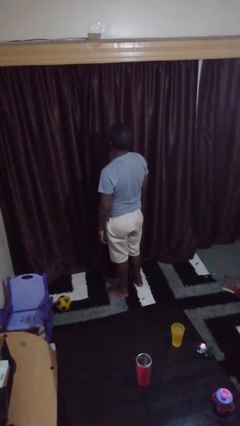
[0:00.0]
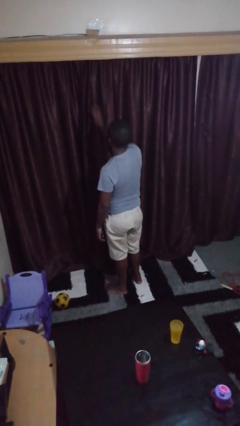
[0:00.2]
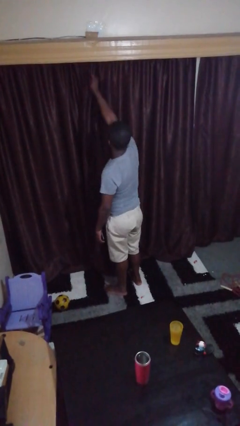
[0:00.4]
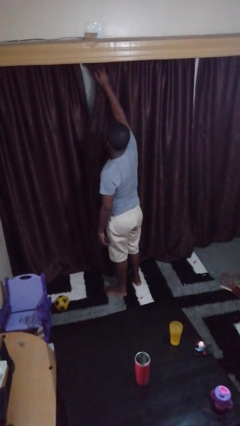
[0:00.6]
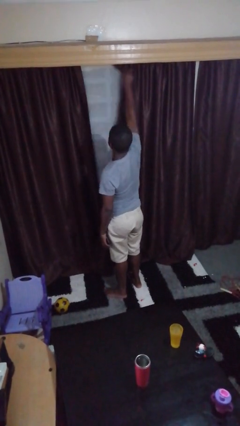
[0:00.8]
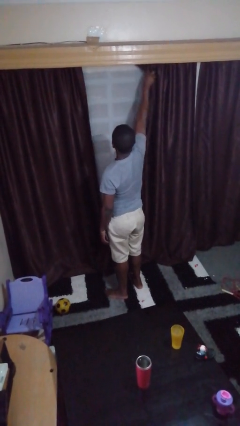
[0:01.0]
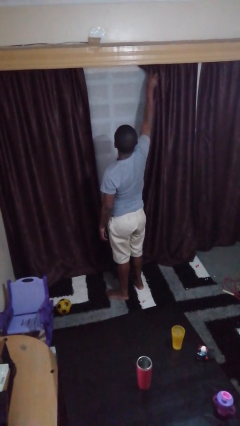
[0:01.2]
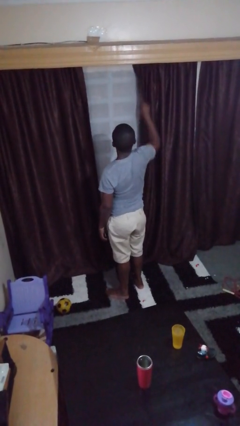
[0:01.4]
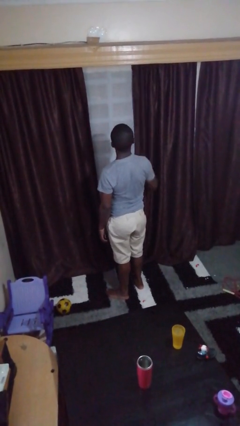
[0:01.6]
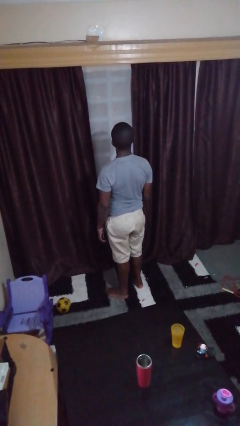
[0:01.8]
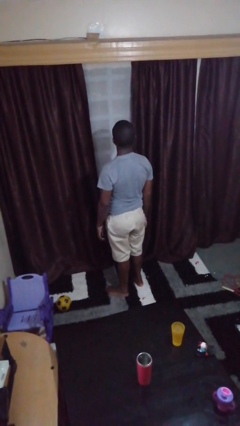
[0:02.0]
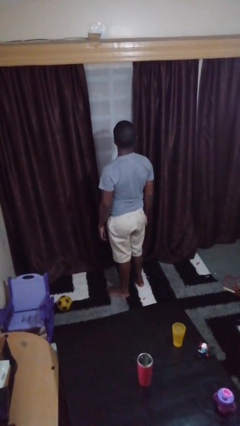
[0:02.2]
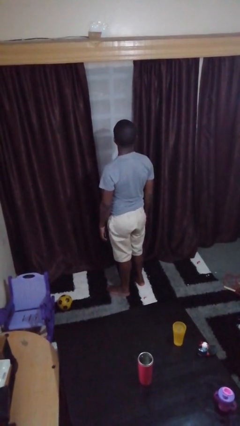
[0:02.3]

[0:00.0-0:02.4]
person opens curtains

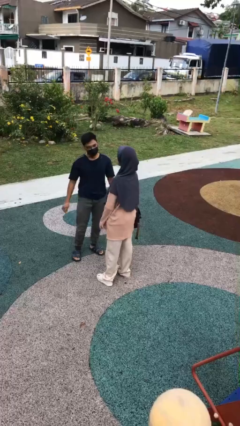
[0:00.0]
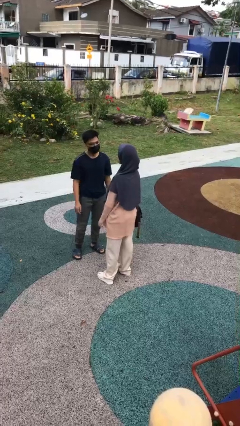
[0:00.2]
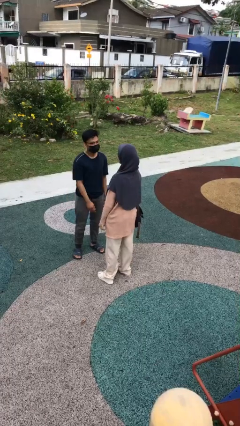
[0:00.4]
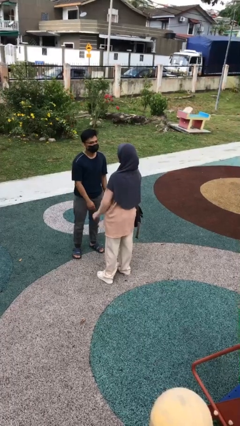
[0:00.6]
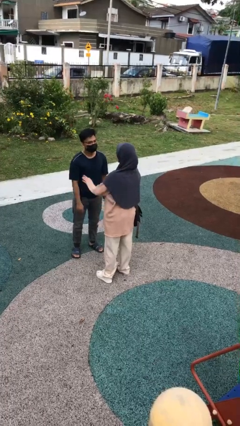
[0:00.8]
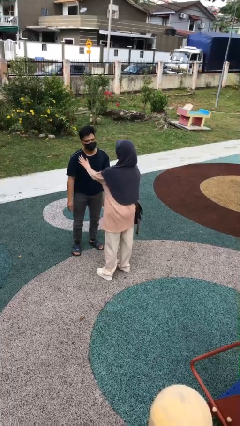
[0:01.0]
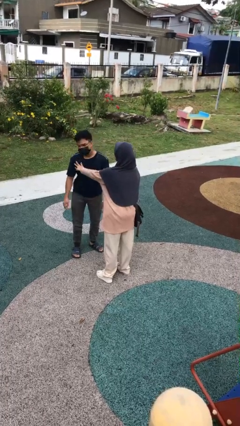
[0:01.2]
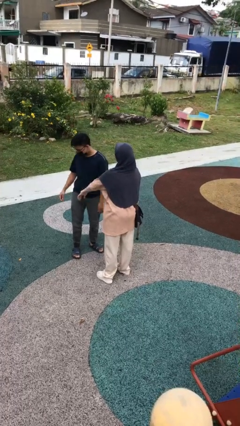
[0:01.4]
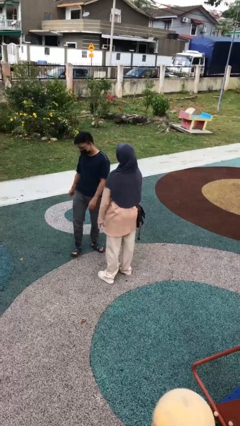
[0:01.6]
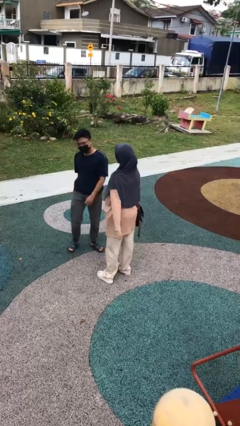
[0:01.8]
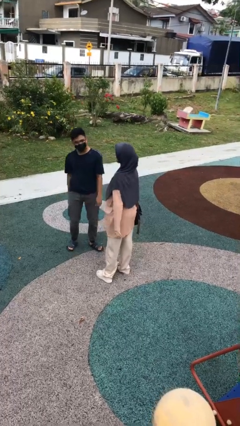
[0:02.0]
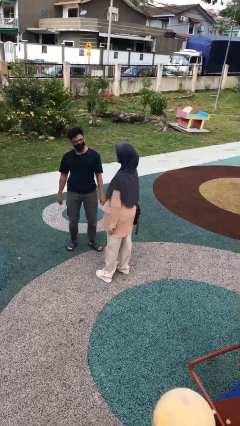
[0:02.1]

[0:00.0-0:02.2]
person shoves person

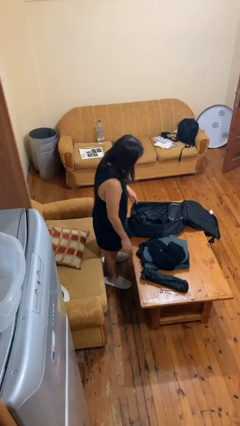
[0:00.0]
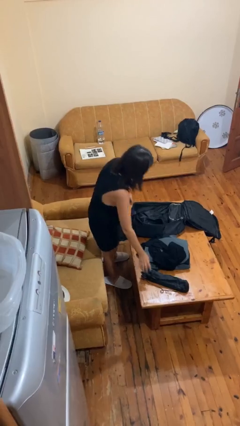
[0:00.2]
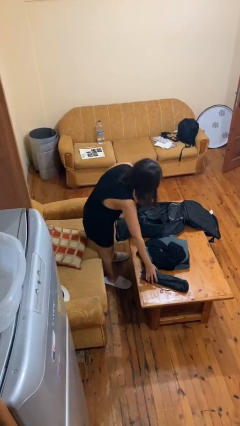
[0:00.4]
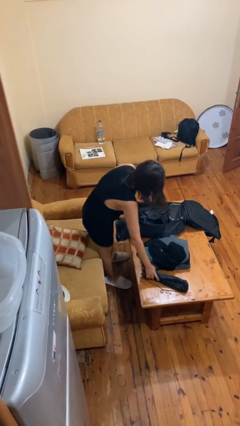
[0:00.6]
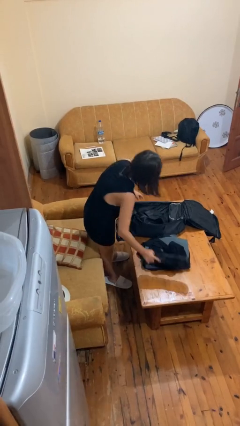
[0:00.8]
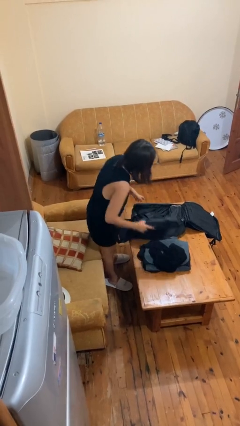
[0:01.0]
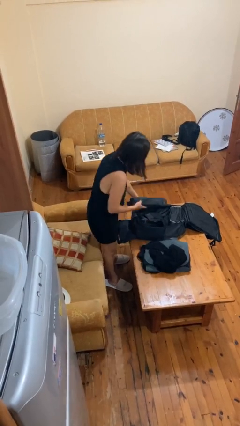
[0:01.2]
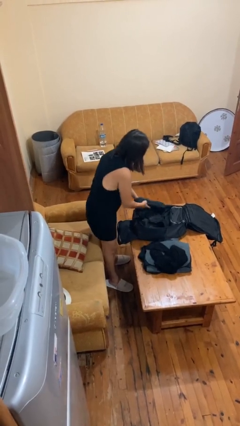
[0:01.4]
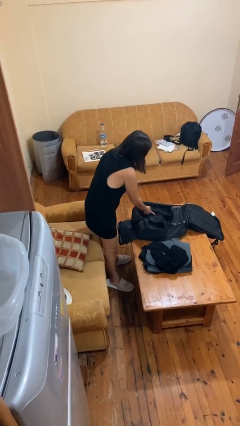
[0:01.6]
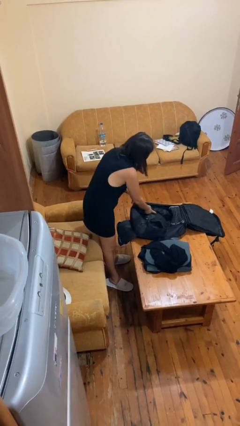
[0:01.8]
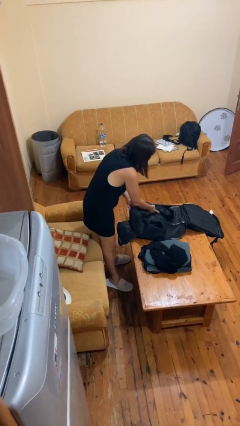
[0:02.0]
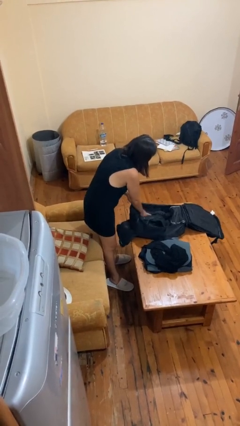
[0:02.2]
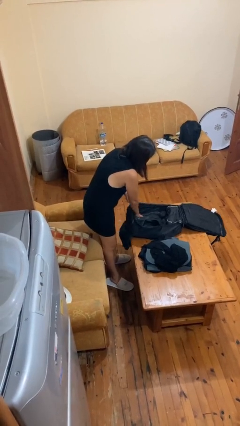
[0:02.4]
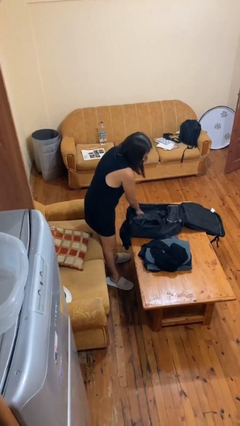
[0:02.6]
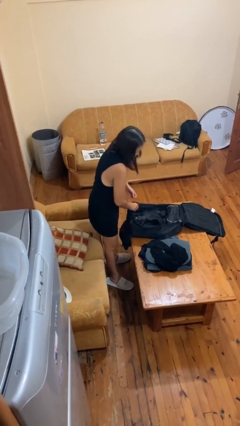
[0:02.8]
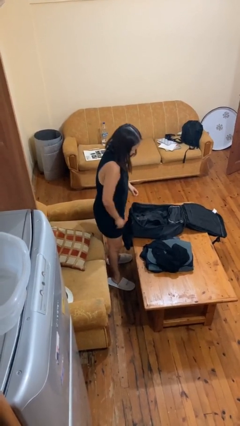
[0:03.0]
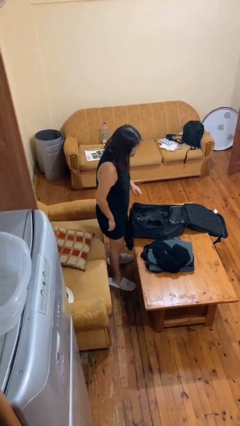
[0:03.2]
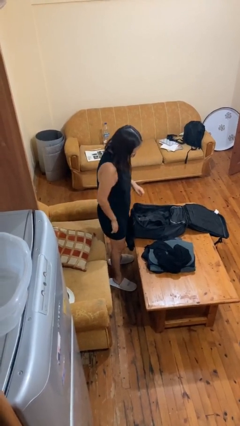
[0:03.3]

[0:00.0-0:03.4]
person loads clothes into suitcase

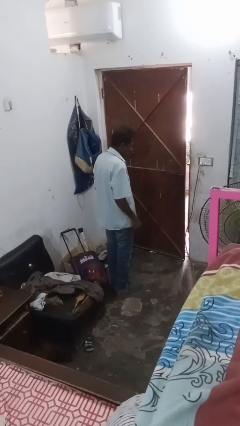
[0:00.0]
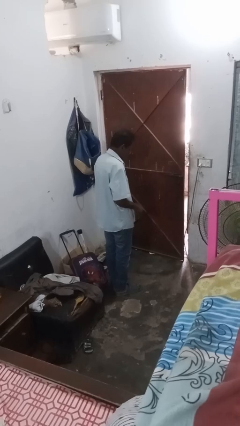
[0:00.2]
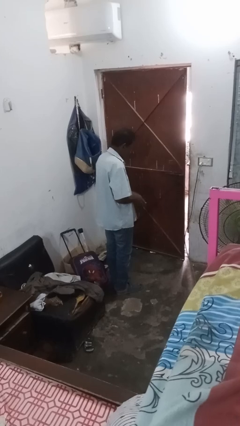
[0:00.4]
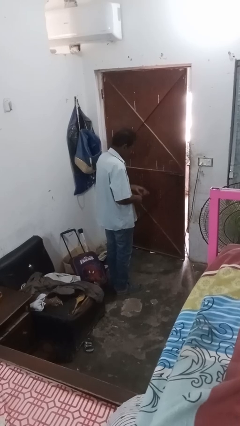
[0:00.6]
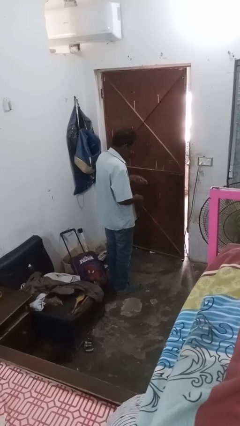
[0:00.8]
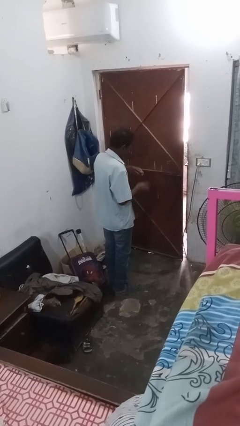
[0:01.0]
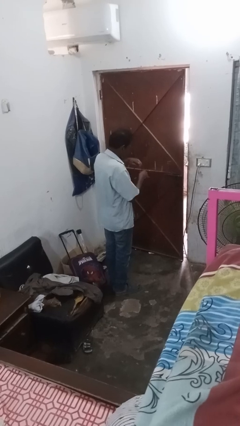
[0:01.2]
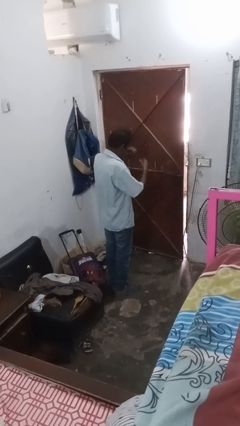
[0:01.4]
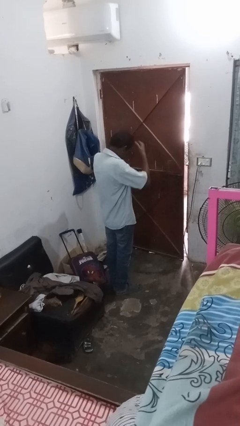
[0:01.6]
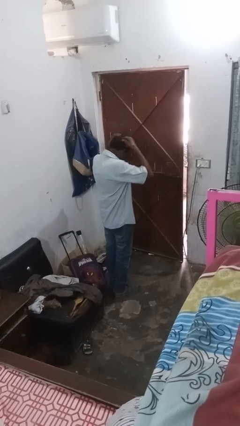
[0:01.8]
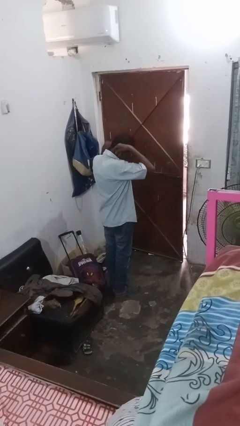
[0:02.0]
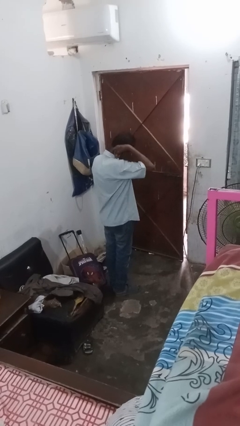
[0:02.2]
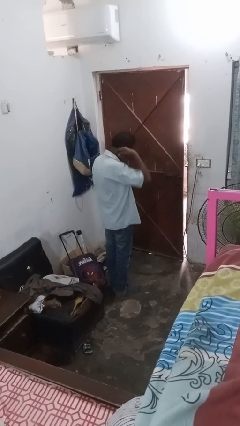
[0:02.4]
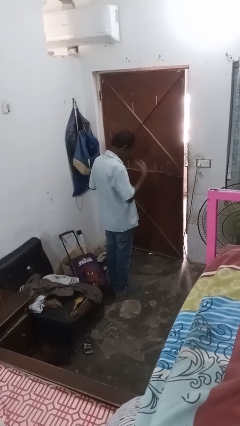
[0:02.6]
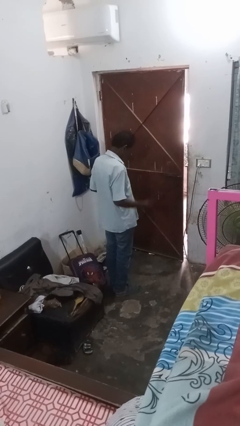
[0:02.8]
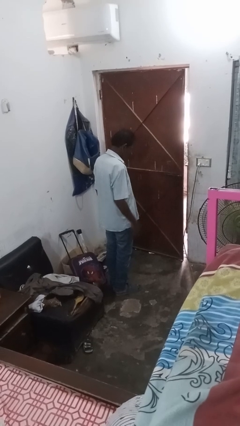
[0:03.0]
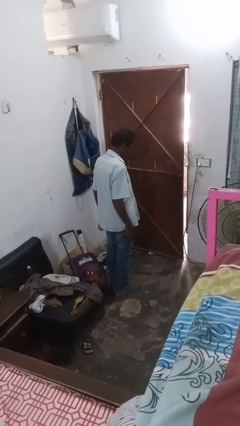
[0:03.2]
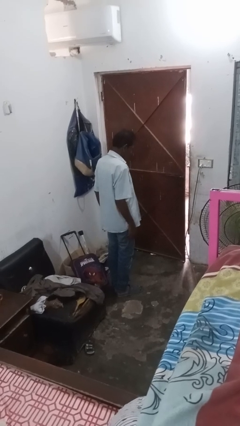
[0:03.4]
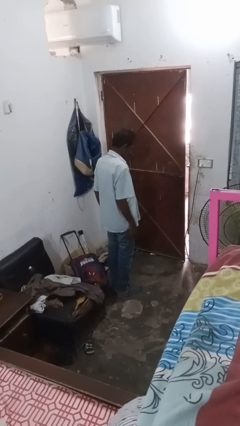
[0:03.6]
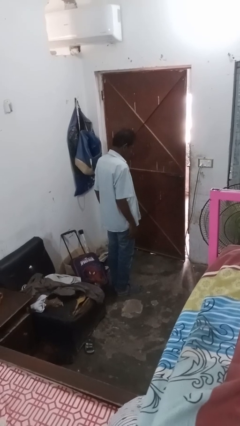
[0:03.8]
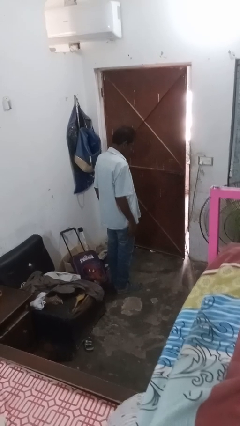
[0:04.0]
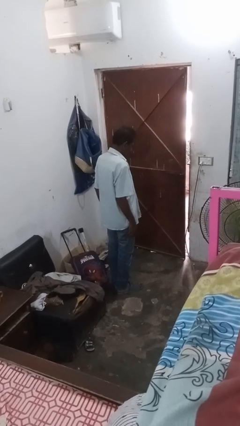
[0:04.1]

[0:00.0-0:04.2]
person puts on necklace

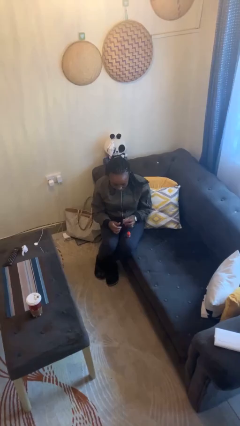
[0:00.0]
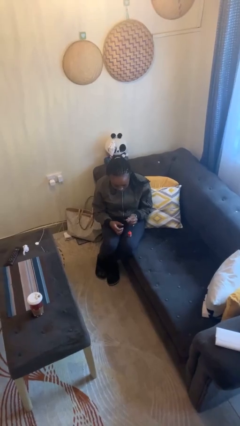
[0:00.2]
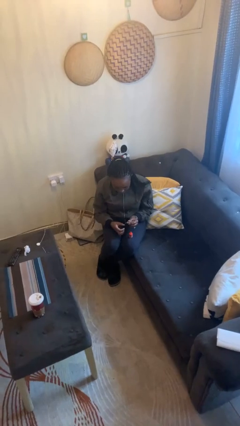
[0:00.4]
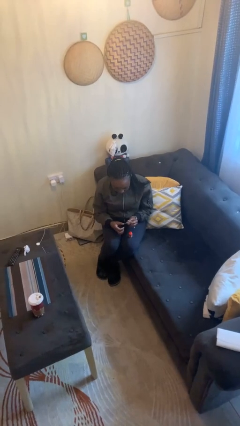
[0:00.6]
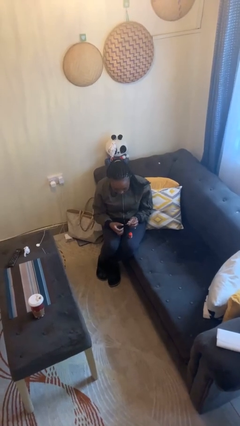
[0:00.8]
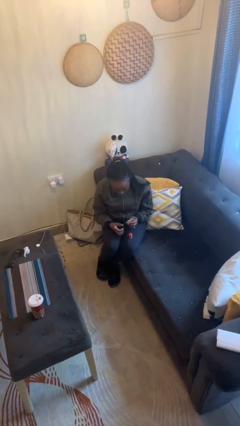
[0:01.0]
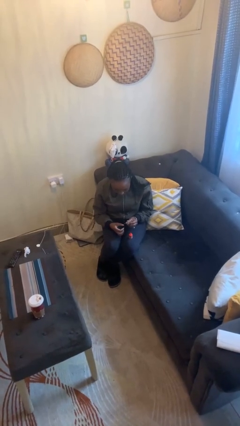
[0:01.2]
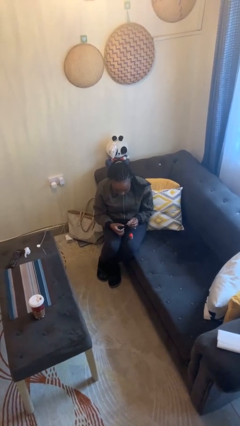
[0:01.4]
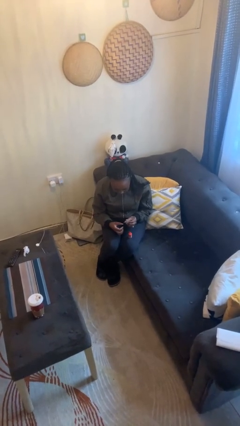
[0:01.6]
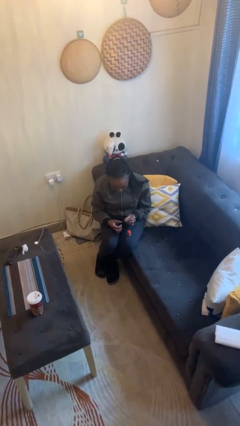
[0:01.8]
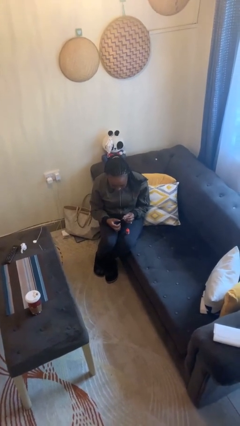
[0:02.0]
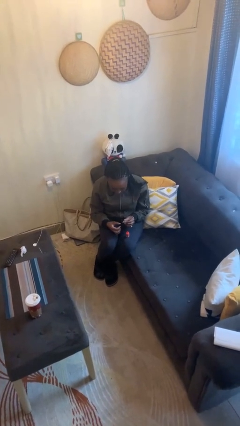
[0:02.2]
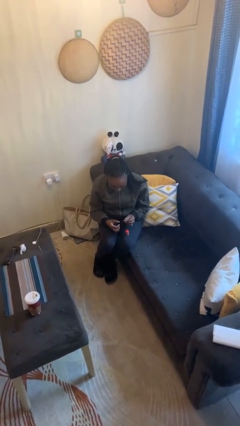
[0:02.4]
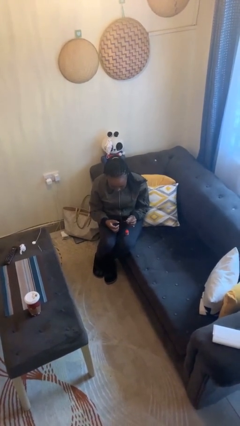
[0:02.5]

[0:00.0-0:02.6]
person paints fingernails

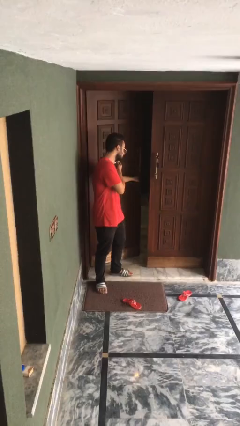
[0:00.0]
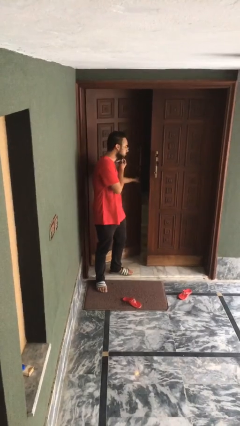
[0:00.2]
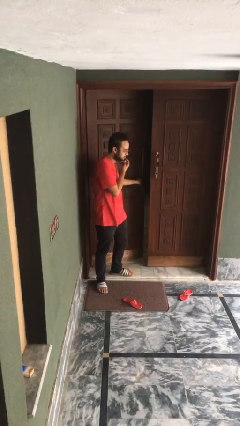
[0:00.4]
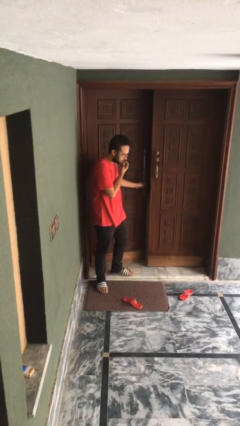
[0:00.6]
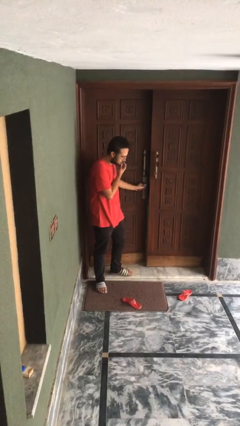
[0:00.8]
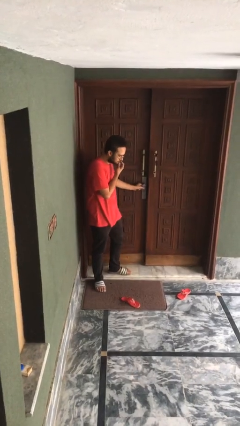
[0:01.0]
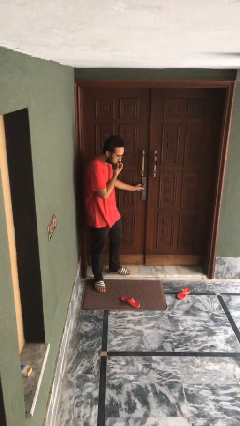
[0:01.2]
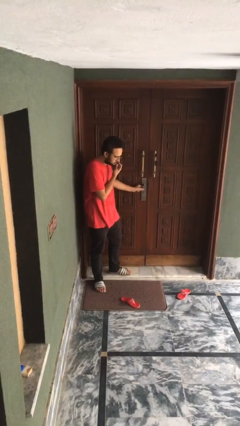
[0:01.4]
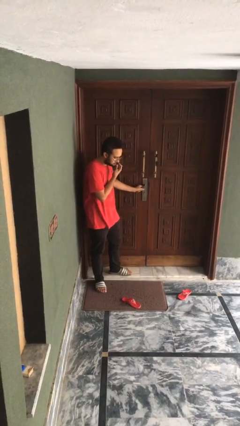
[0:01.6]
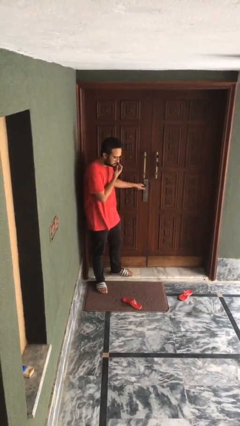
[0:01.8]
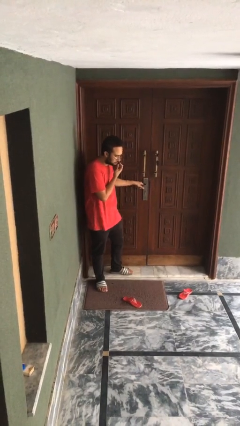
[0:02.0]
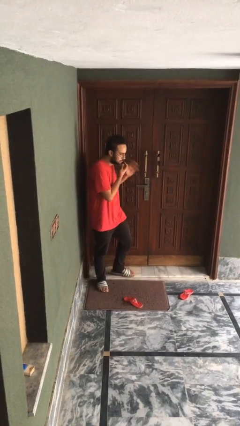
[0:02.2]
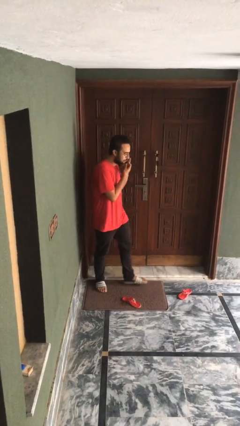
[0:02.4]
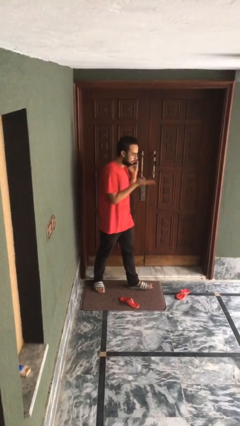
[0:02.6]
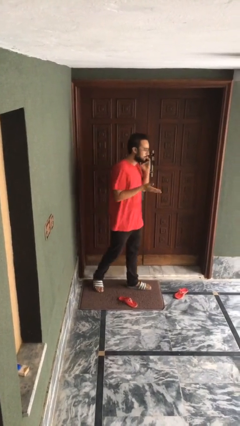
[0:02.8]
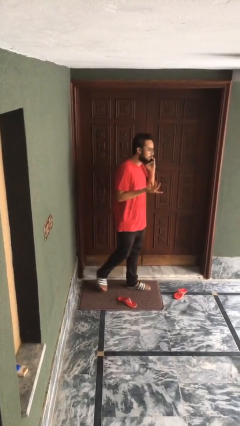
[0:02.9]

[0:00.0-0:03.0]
person closes facility door
